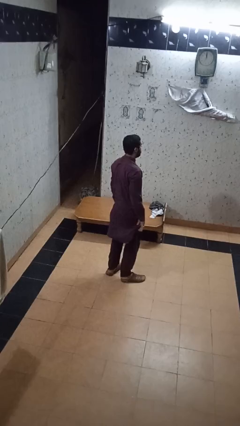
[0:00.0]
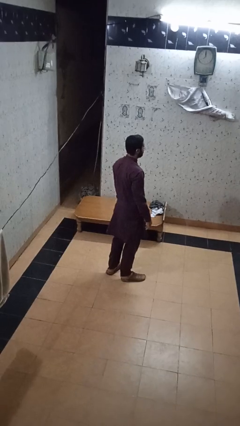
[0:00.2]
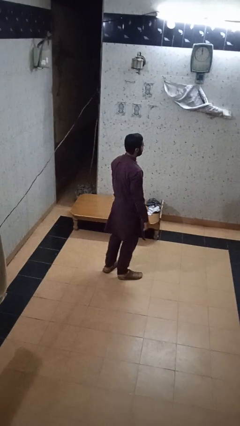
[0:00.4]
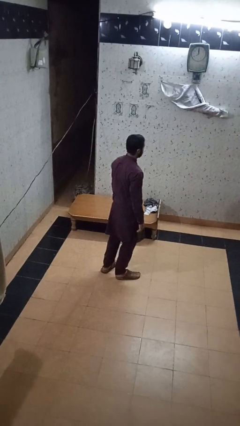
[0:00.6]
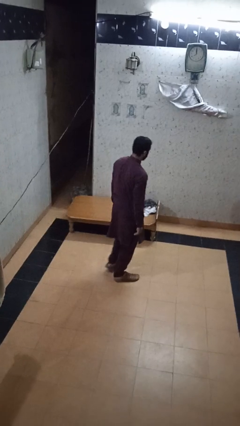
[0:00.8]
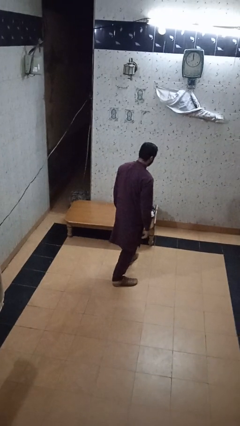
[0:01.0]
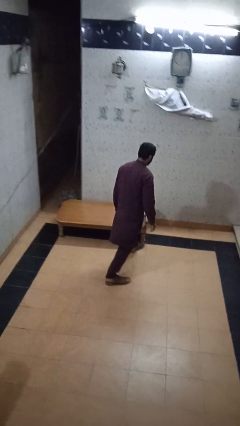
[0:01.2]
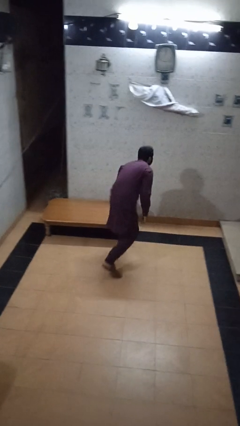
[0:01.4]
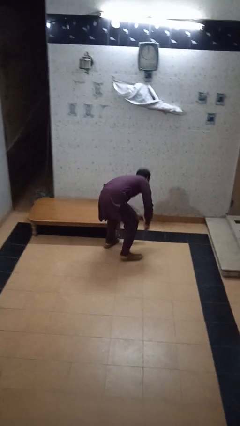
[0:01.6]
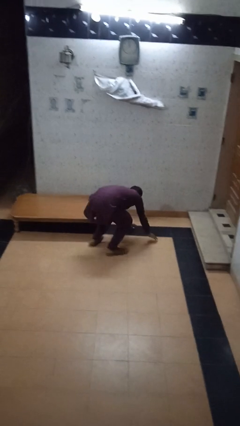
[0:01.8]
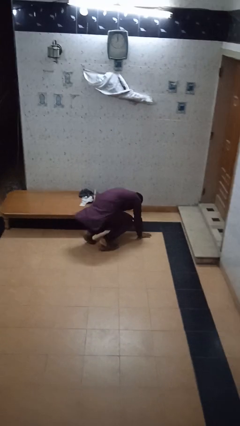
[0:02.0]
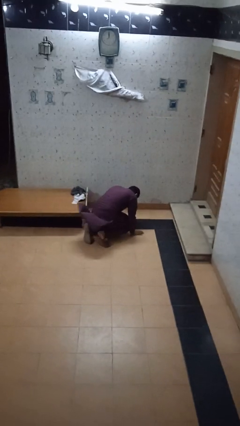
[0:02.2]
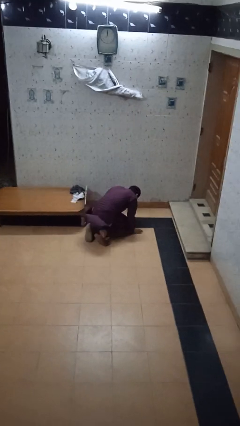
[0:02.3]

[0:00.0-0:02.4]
person trips on object on floor

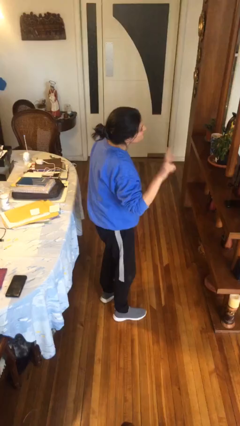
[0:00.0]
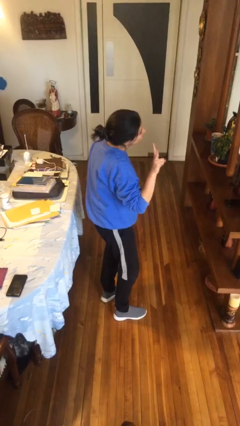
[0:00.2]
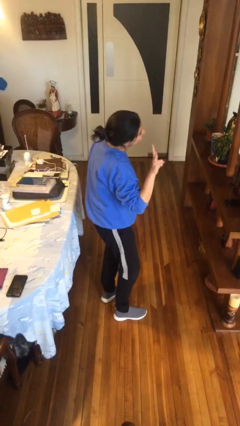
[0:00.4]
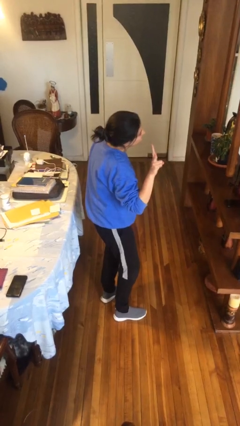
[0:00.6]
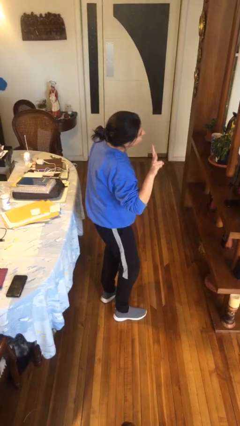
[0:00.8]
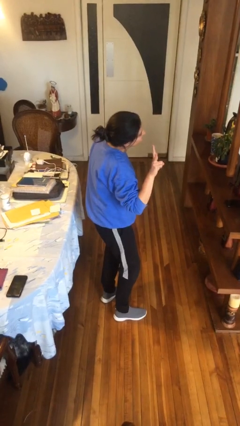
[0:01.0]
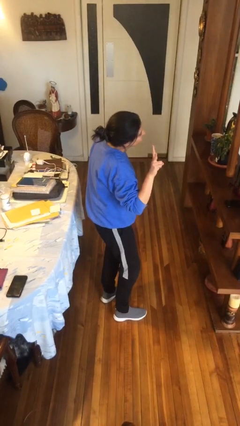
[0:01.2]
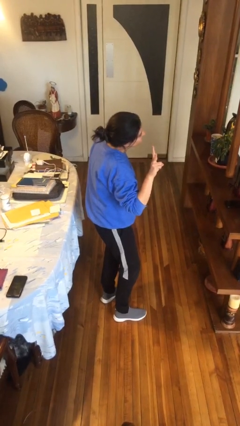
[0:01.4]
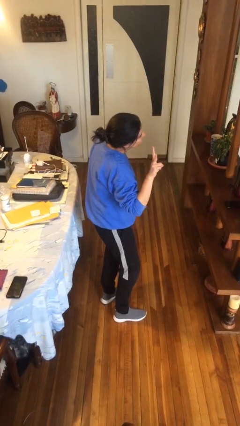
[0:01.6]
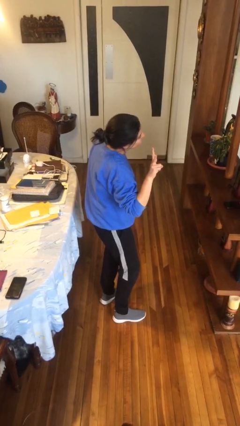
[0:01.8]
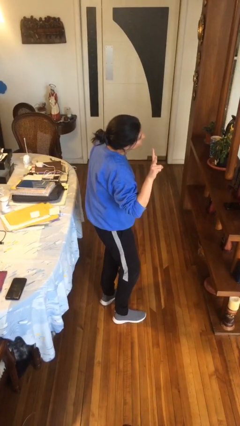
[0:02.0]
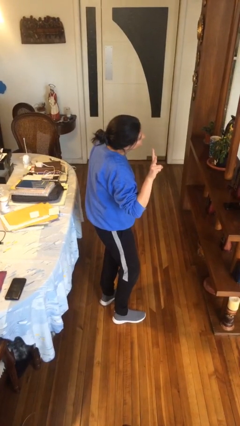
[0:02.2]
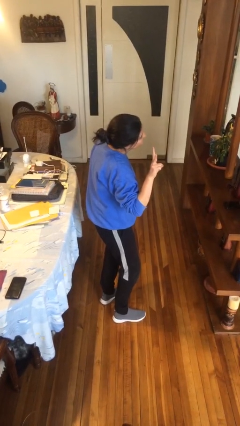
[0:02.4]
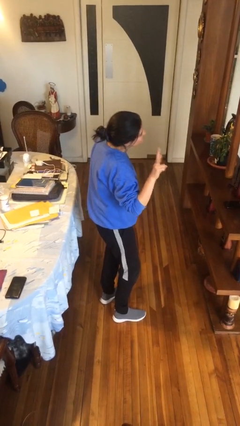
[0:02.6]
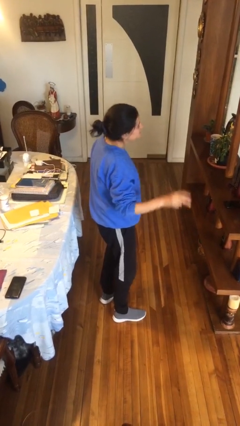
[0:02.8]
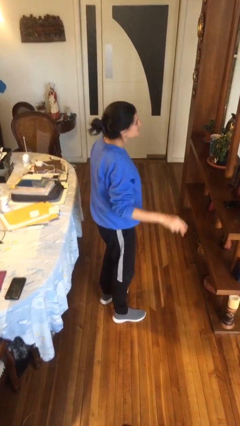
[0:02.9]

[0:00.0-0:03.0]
person gestures peace

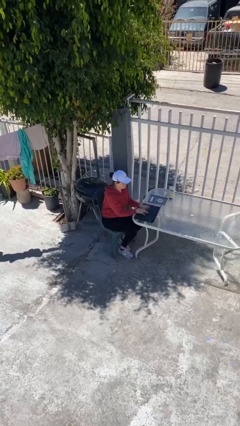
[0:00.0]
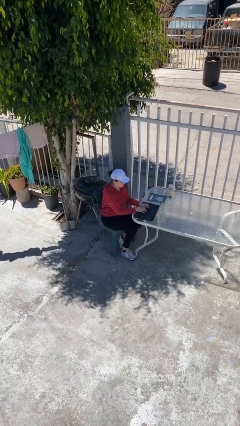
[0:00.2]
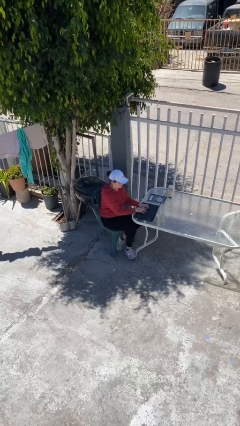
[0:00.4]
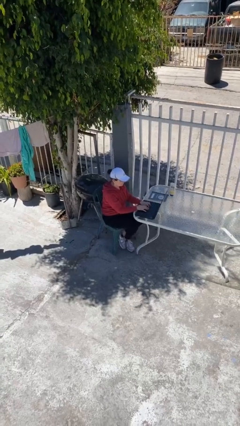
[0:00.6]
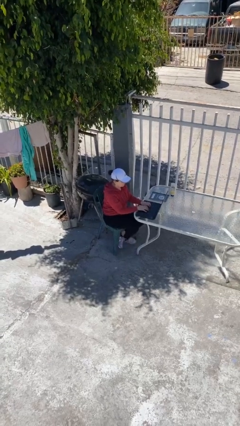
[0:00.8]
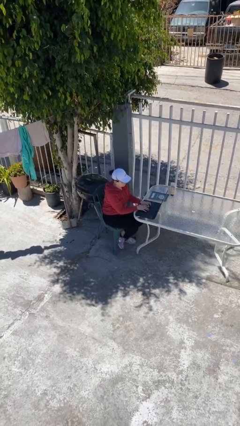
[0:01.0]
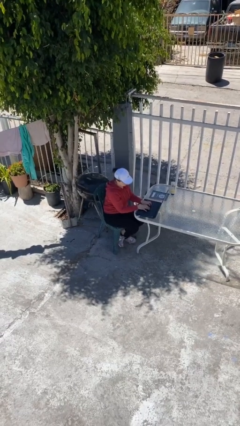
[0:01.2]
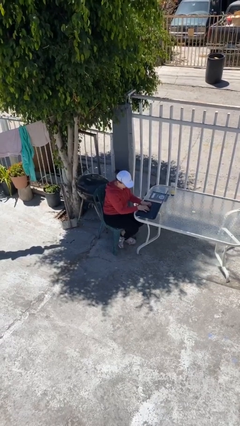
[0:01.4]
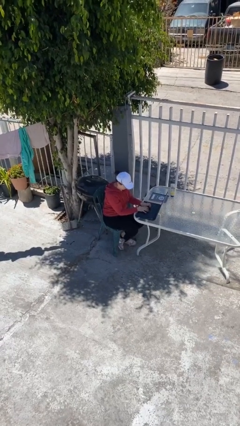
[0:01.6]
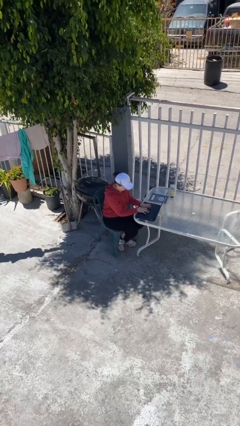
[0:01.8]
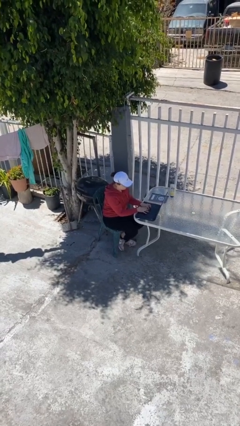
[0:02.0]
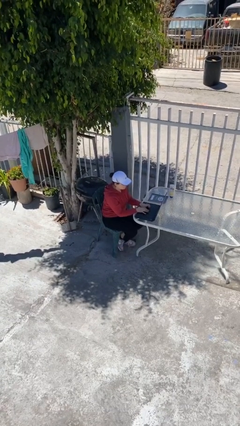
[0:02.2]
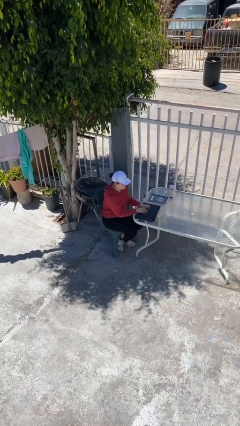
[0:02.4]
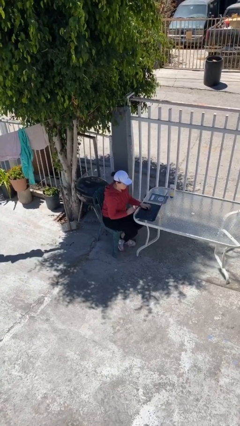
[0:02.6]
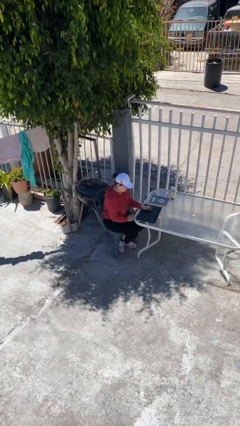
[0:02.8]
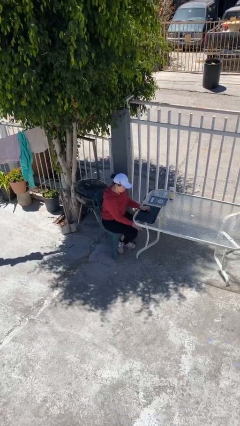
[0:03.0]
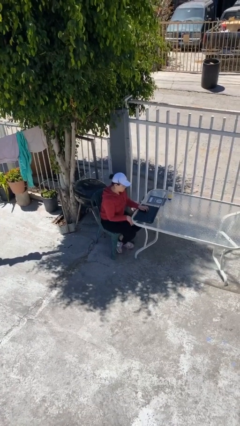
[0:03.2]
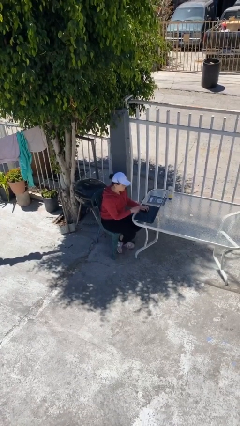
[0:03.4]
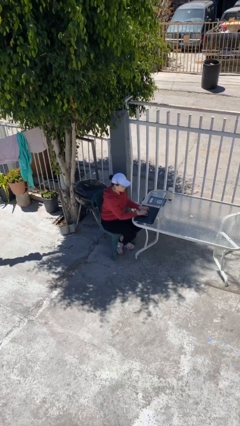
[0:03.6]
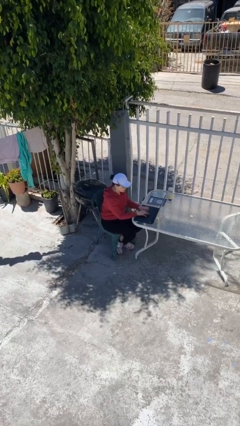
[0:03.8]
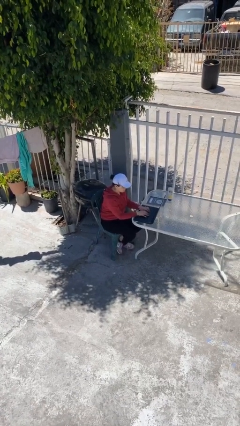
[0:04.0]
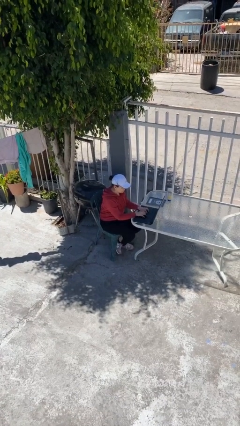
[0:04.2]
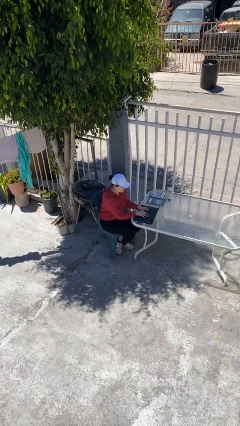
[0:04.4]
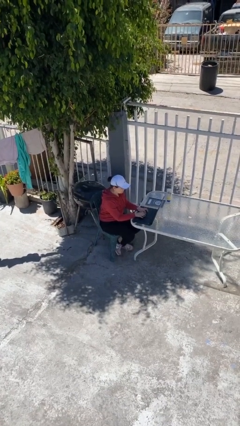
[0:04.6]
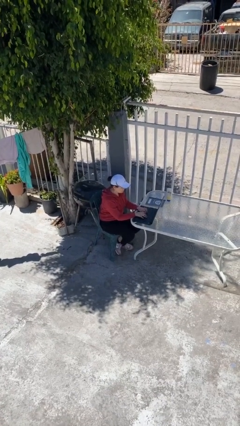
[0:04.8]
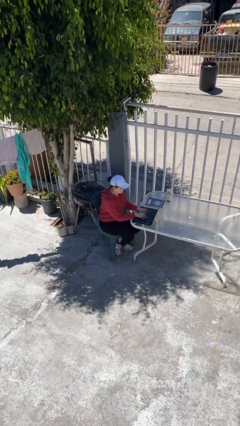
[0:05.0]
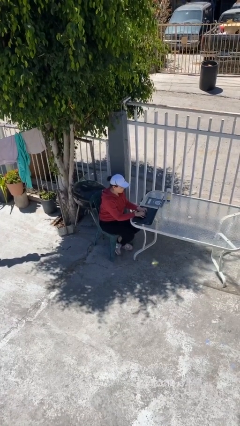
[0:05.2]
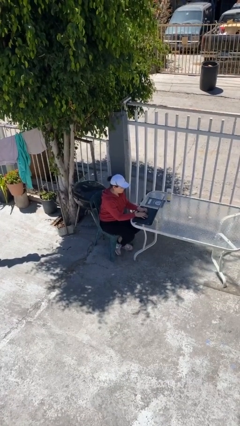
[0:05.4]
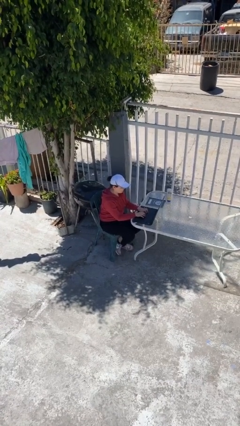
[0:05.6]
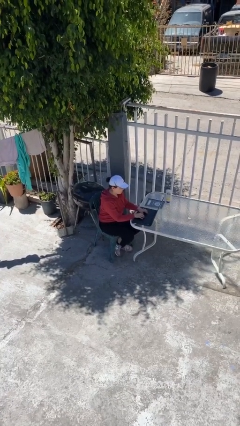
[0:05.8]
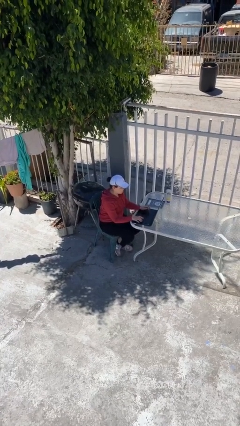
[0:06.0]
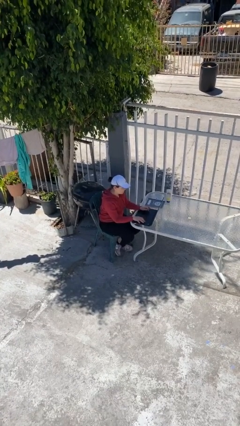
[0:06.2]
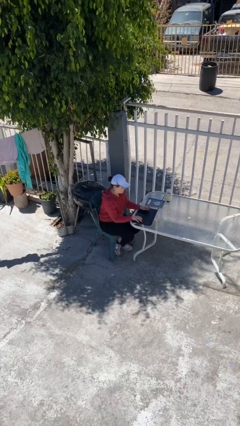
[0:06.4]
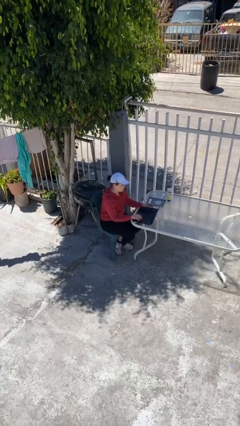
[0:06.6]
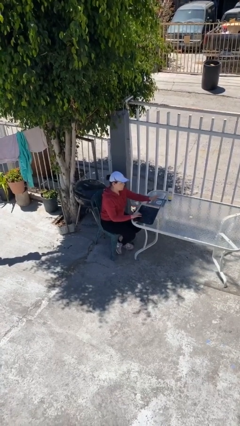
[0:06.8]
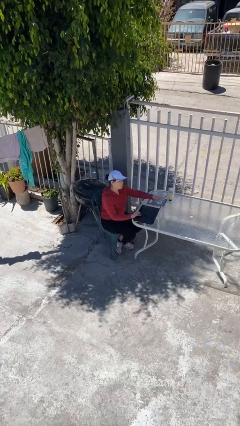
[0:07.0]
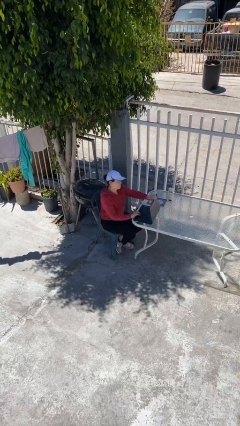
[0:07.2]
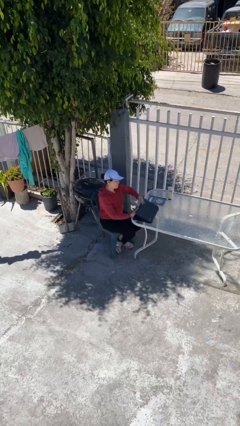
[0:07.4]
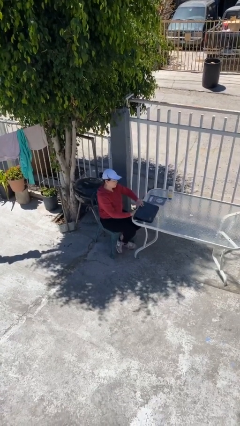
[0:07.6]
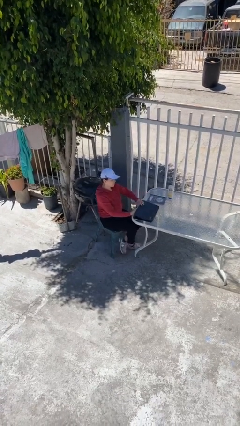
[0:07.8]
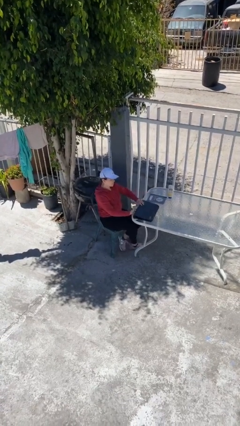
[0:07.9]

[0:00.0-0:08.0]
person interacts with laptop

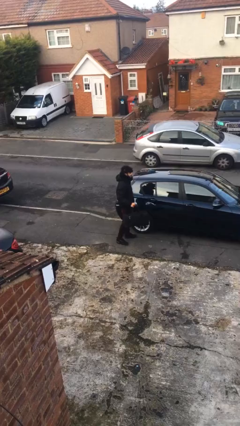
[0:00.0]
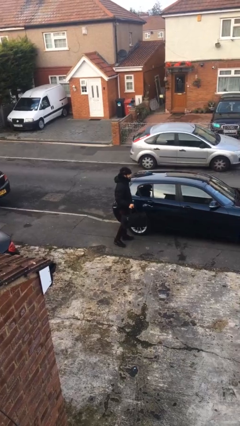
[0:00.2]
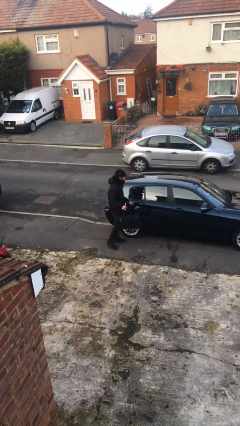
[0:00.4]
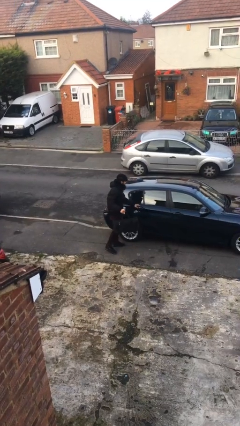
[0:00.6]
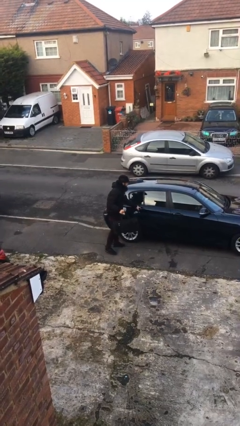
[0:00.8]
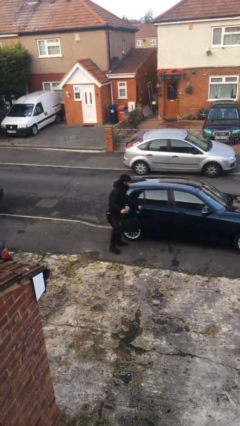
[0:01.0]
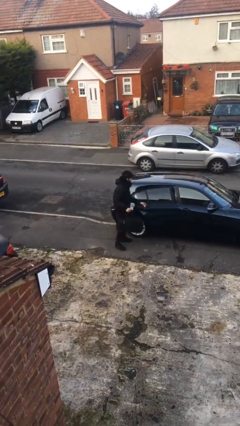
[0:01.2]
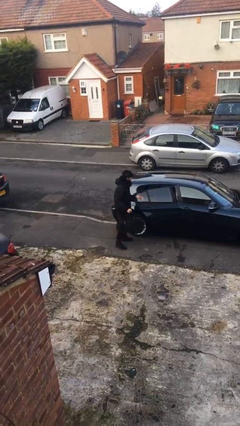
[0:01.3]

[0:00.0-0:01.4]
person opens car door

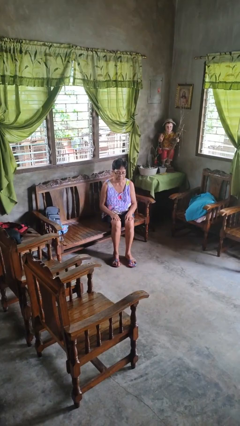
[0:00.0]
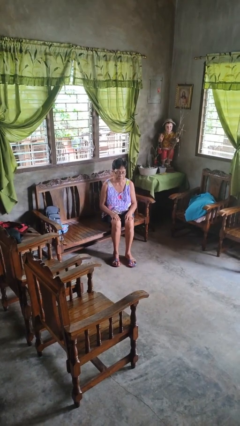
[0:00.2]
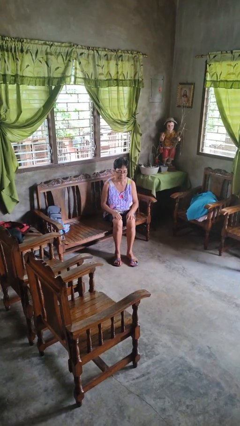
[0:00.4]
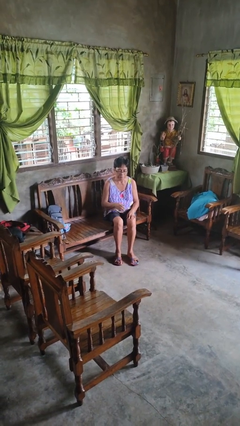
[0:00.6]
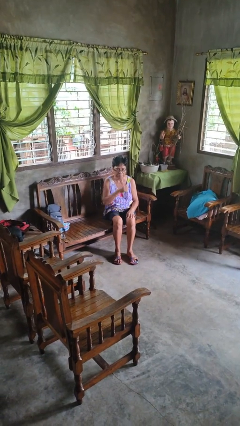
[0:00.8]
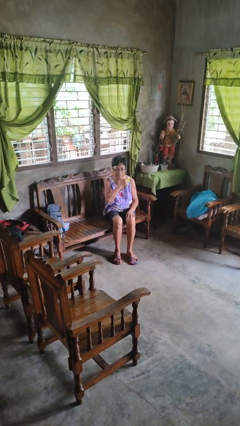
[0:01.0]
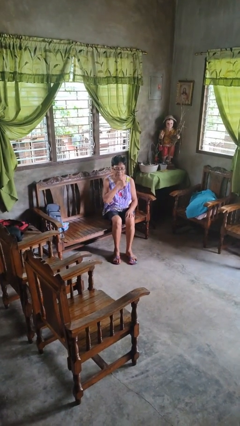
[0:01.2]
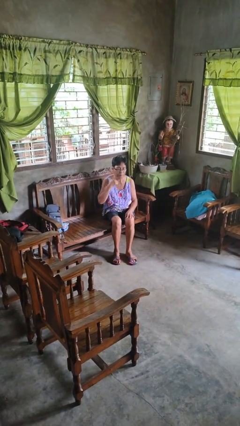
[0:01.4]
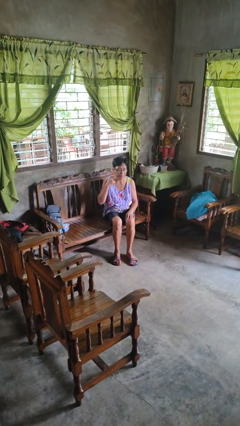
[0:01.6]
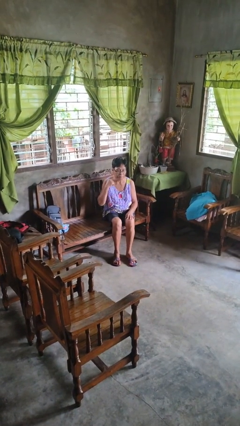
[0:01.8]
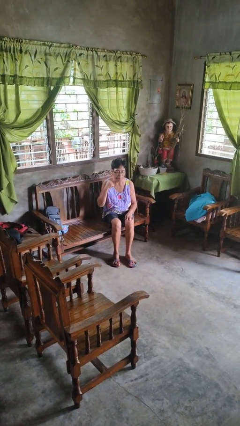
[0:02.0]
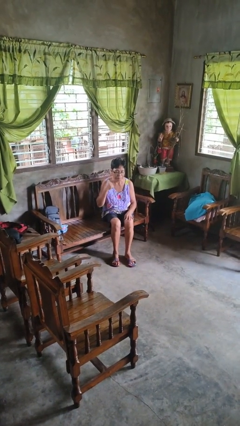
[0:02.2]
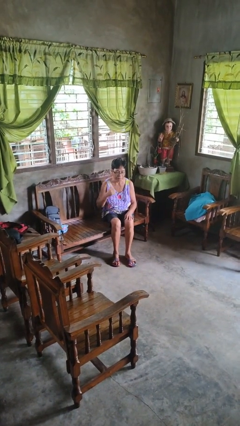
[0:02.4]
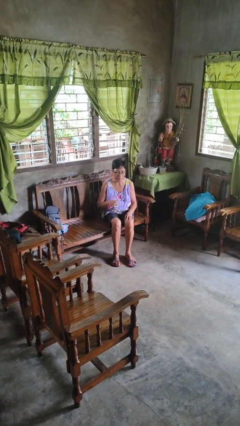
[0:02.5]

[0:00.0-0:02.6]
person gestures cut

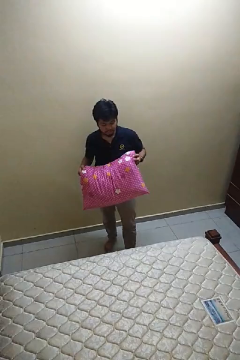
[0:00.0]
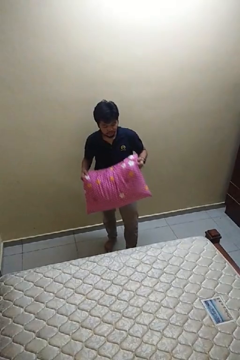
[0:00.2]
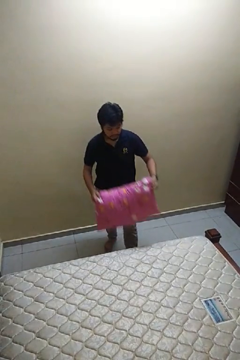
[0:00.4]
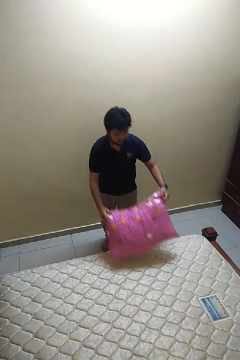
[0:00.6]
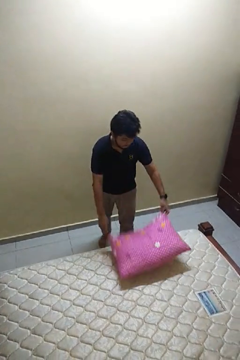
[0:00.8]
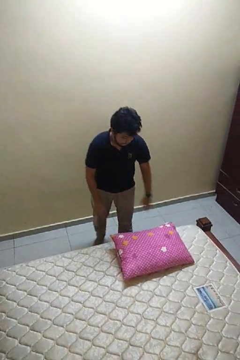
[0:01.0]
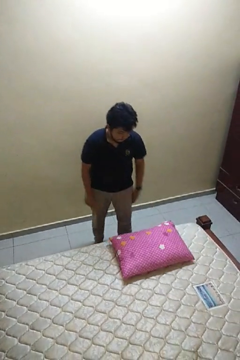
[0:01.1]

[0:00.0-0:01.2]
person puts down object on bed
